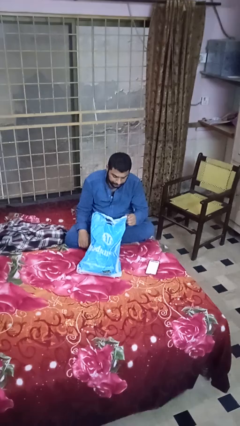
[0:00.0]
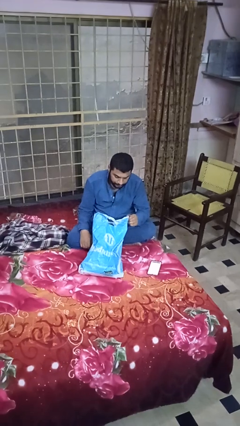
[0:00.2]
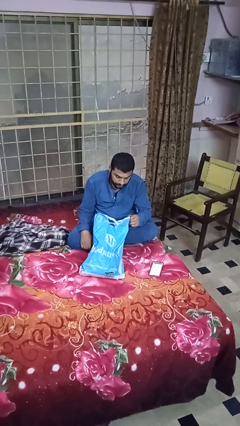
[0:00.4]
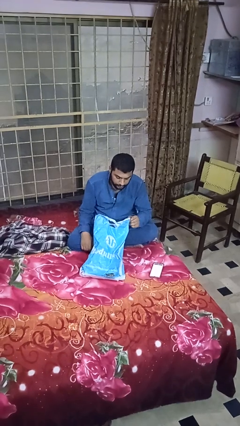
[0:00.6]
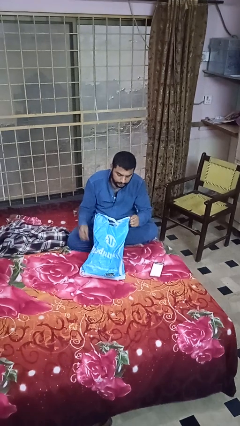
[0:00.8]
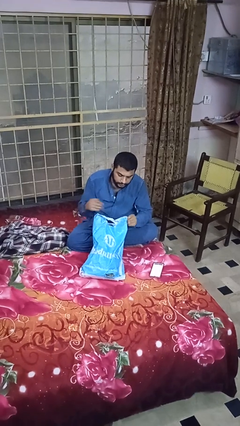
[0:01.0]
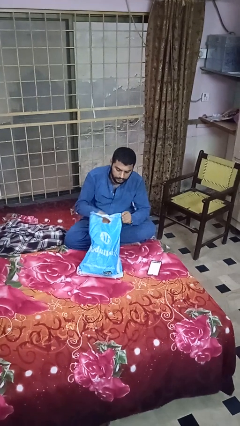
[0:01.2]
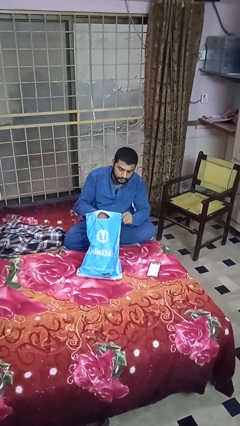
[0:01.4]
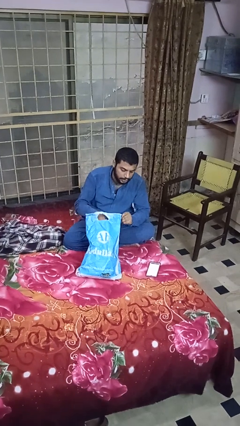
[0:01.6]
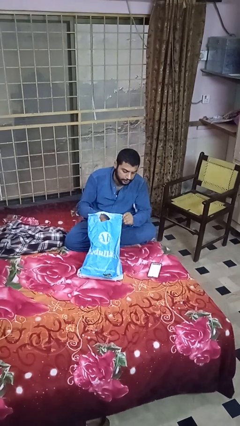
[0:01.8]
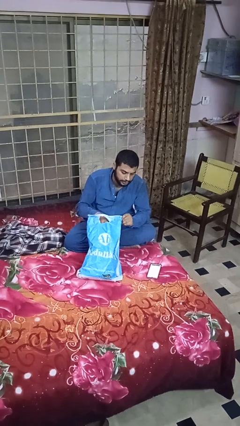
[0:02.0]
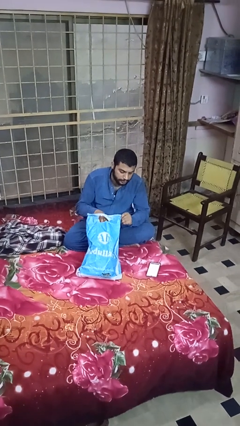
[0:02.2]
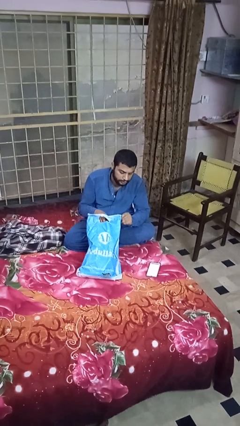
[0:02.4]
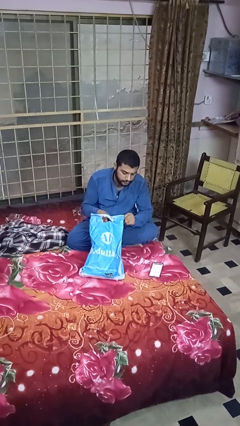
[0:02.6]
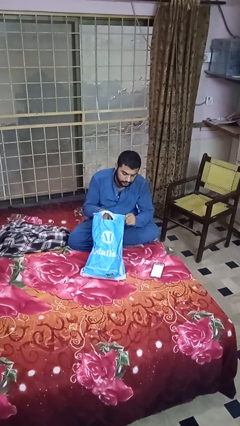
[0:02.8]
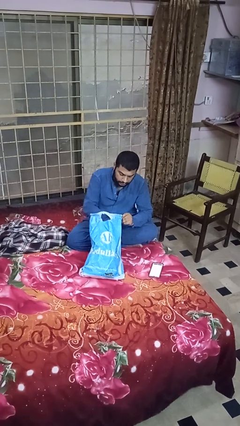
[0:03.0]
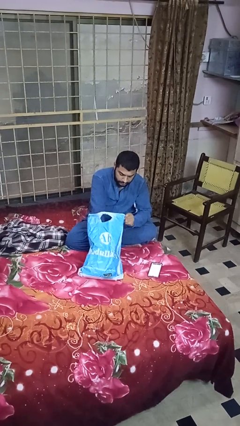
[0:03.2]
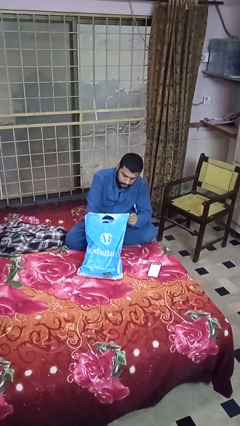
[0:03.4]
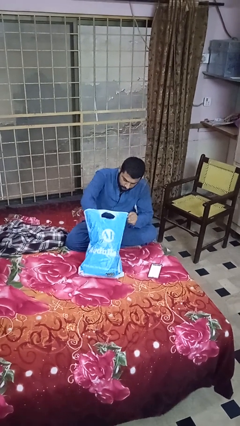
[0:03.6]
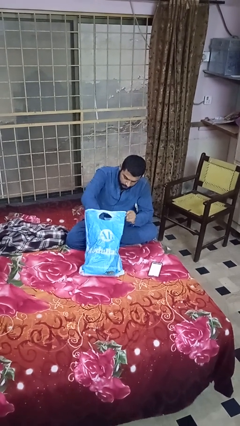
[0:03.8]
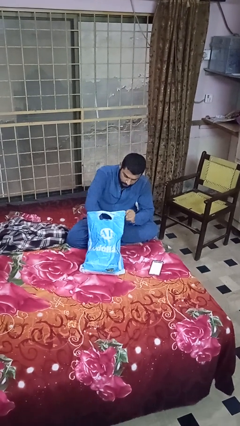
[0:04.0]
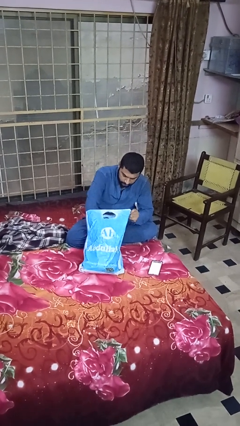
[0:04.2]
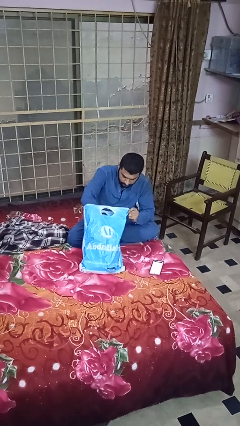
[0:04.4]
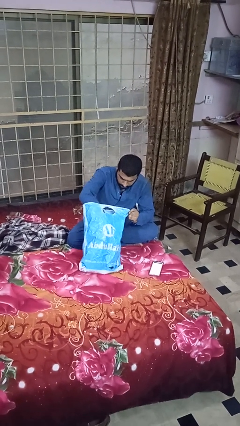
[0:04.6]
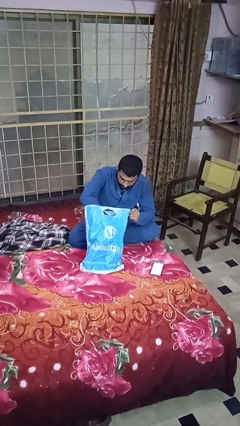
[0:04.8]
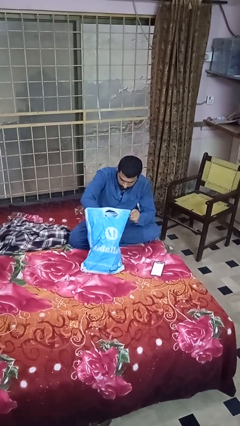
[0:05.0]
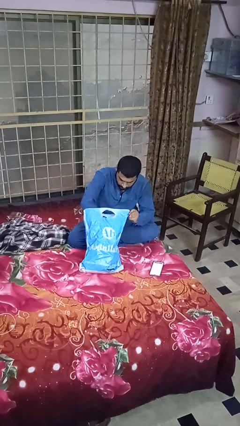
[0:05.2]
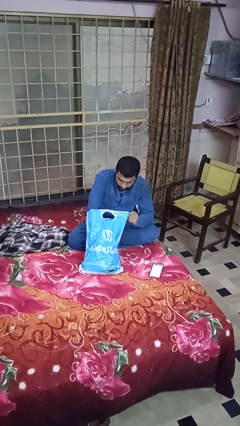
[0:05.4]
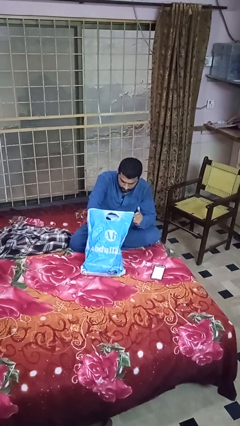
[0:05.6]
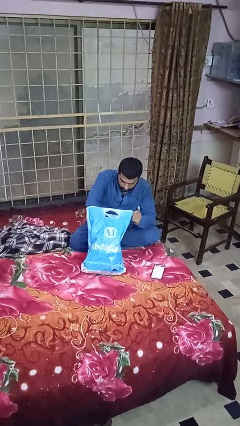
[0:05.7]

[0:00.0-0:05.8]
person searches in bag

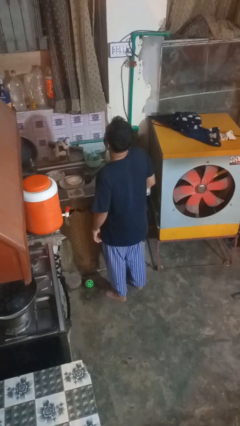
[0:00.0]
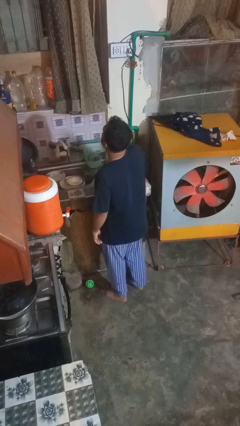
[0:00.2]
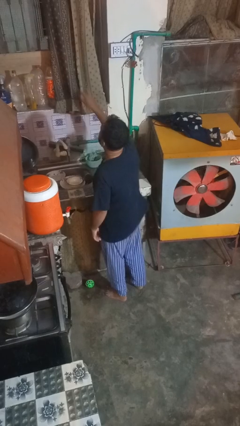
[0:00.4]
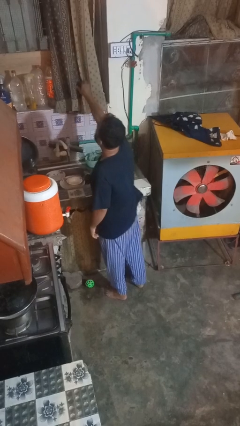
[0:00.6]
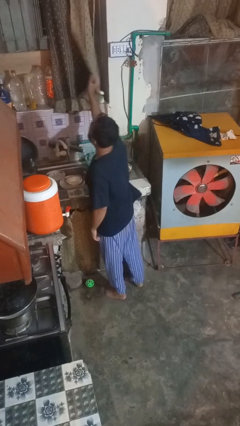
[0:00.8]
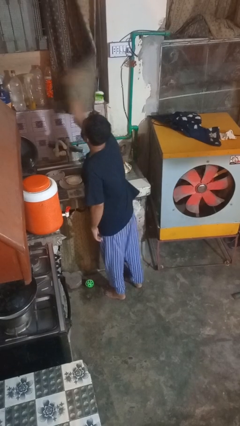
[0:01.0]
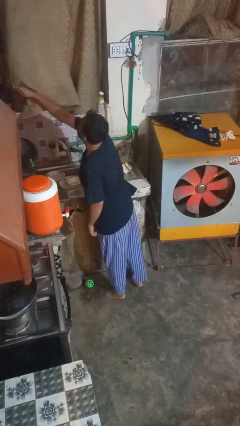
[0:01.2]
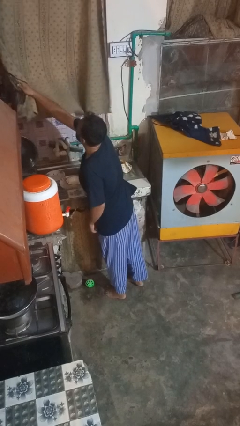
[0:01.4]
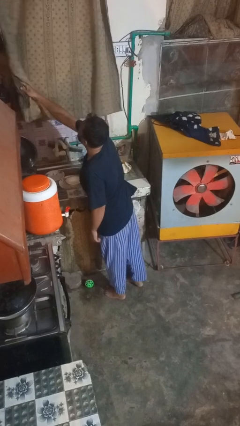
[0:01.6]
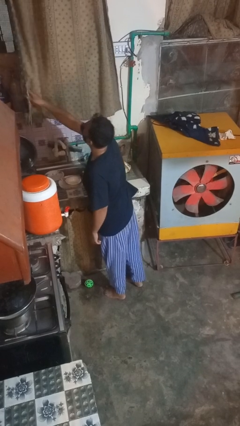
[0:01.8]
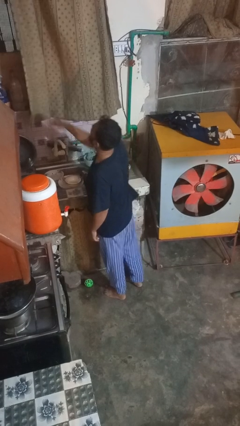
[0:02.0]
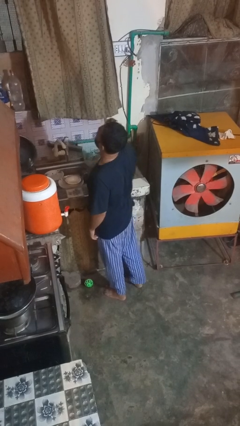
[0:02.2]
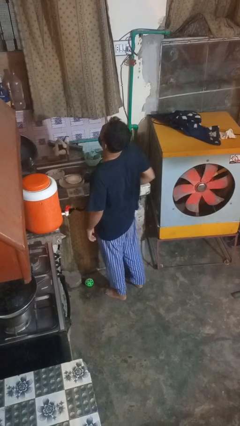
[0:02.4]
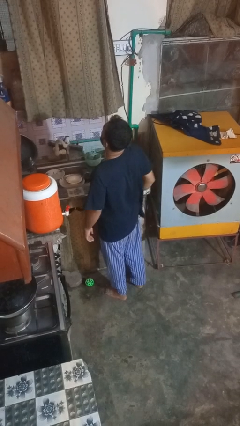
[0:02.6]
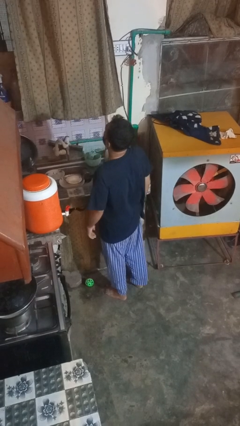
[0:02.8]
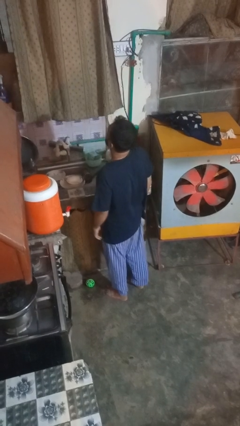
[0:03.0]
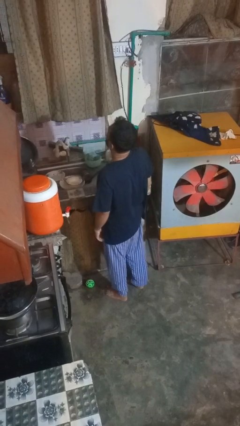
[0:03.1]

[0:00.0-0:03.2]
person closes curtains

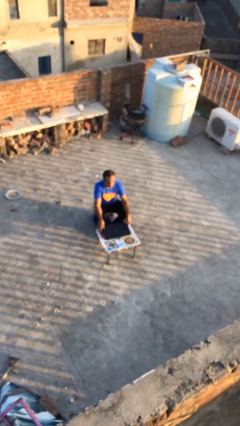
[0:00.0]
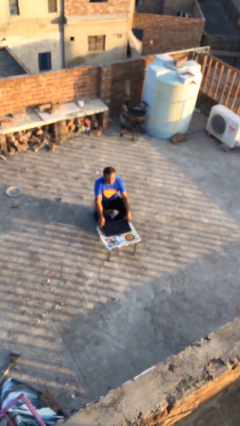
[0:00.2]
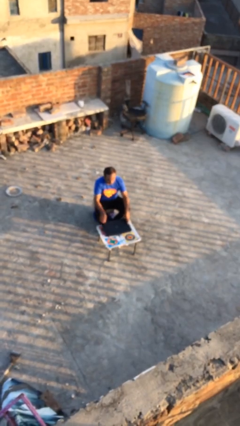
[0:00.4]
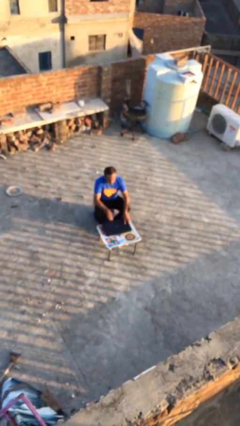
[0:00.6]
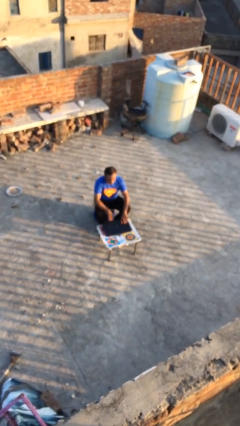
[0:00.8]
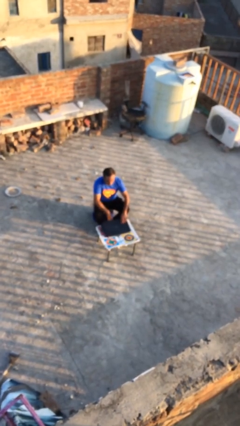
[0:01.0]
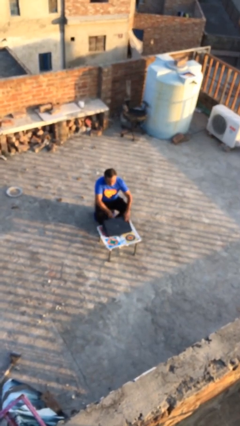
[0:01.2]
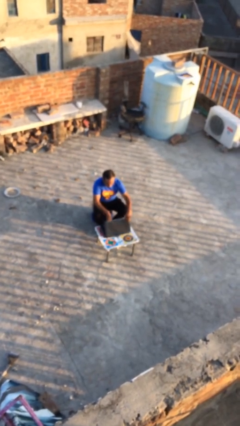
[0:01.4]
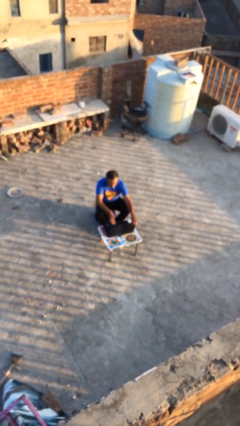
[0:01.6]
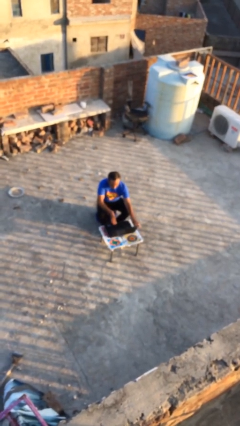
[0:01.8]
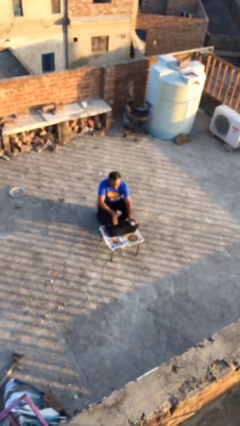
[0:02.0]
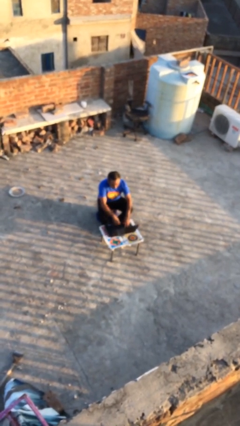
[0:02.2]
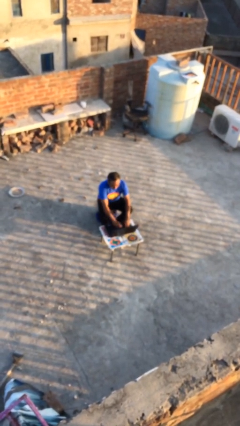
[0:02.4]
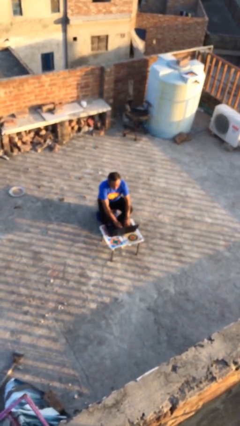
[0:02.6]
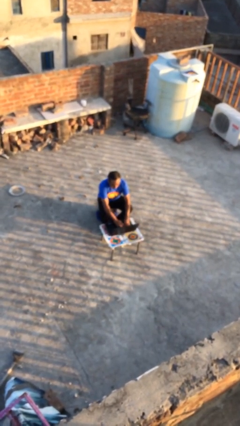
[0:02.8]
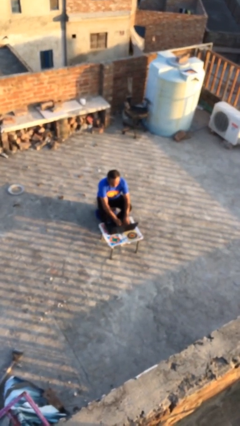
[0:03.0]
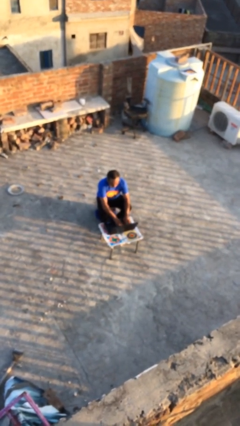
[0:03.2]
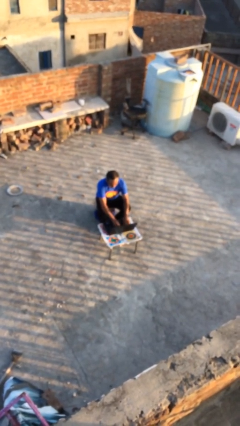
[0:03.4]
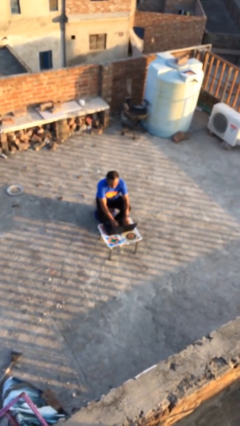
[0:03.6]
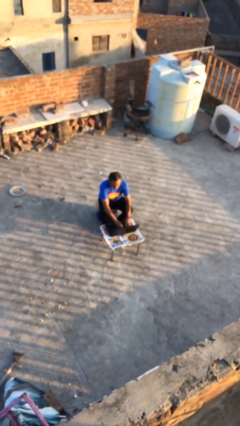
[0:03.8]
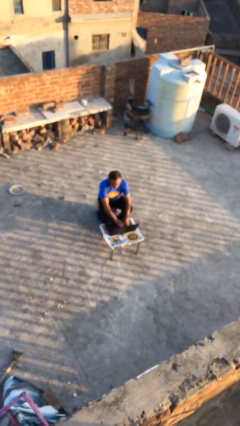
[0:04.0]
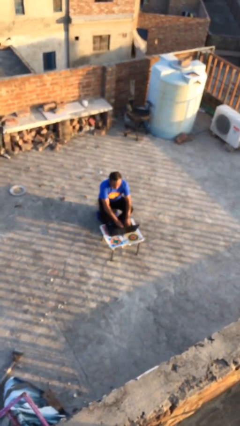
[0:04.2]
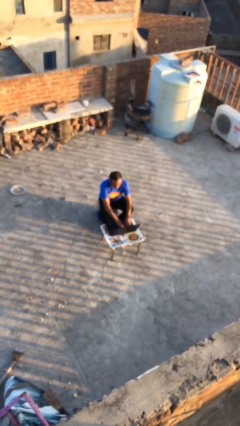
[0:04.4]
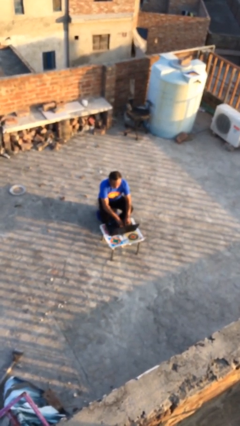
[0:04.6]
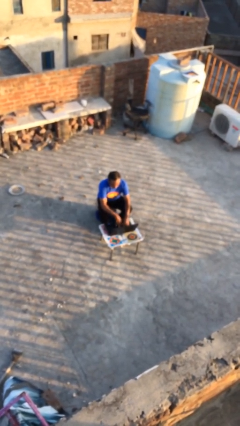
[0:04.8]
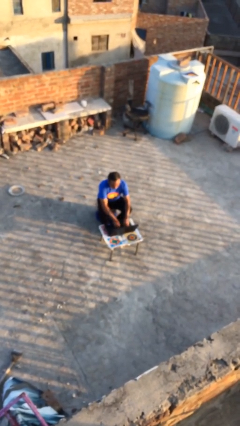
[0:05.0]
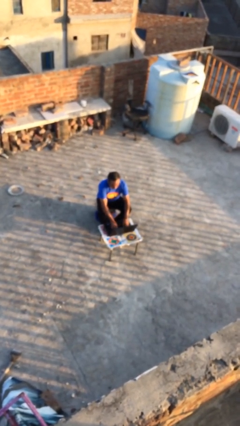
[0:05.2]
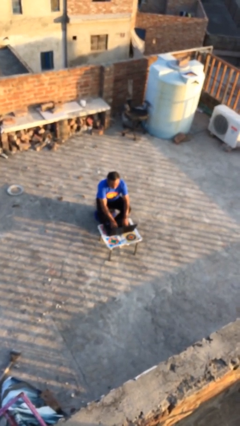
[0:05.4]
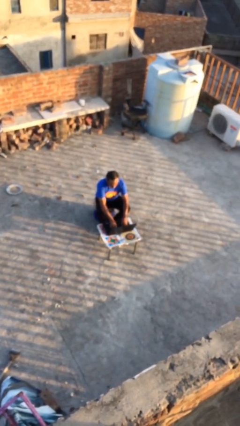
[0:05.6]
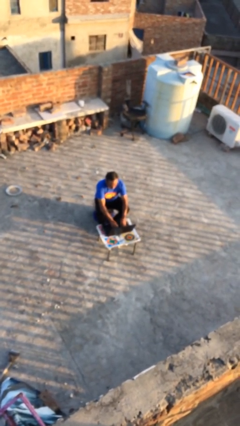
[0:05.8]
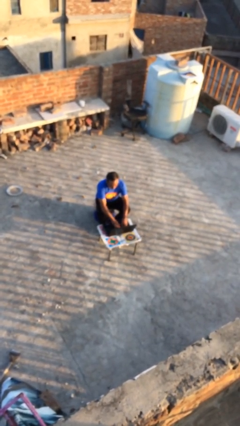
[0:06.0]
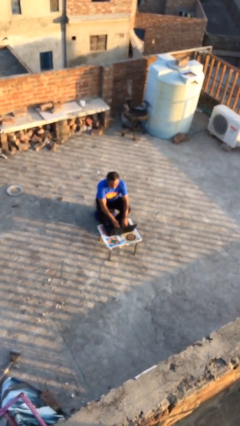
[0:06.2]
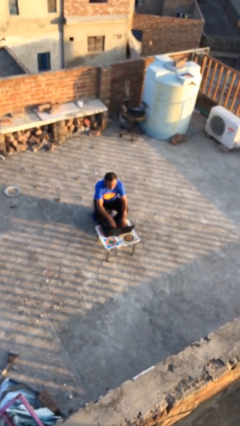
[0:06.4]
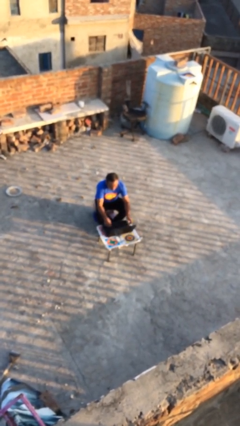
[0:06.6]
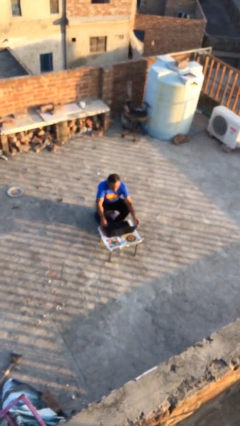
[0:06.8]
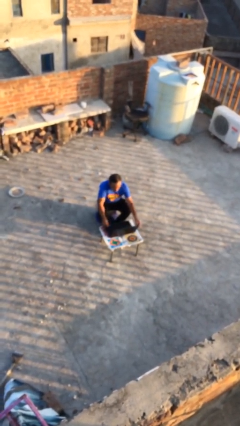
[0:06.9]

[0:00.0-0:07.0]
person interacts with laptop

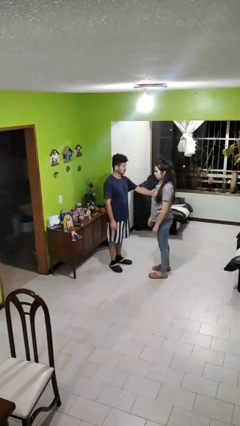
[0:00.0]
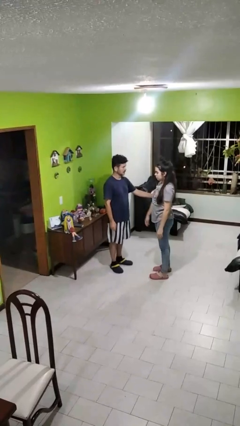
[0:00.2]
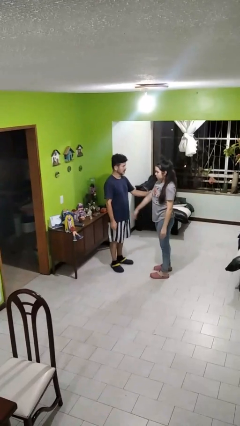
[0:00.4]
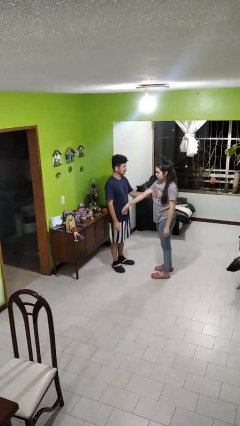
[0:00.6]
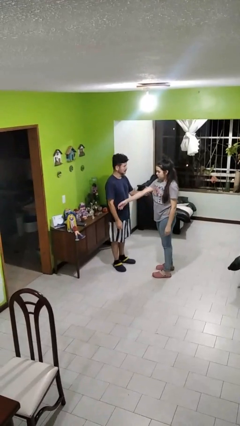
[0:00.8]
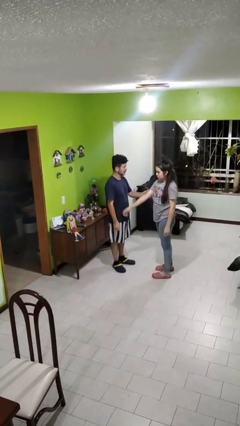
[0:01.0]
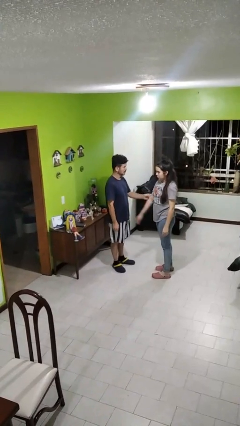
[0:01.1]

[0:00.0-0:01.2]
person grabs person by bicep

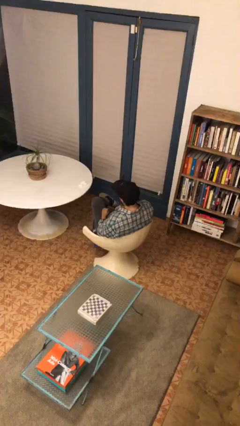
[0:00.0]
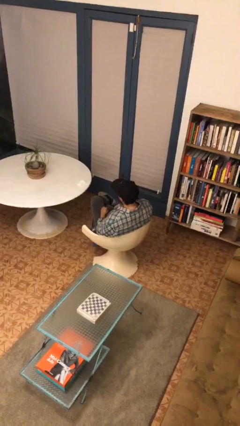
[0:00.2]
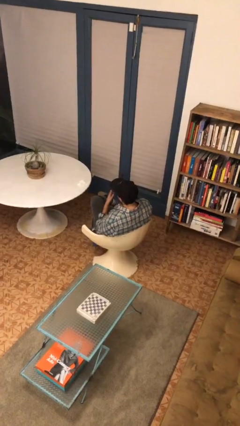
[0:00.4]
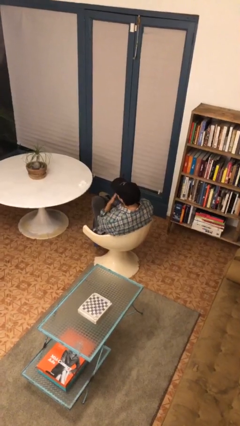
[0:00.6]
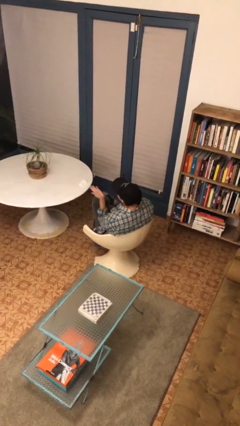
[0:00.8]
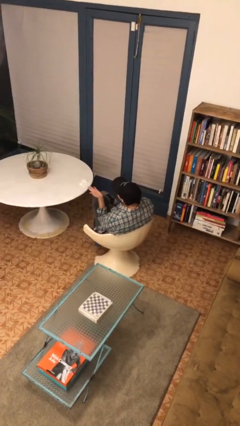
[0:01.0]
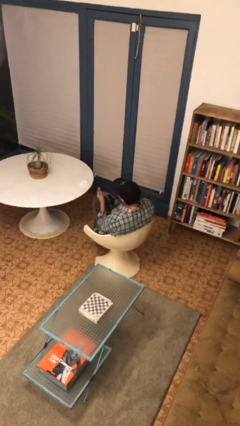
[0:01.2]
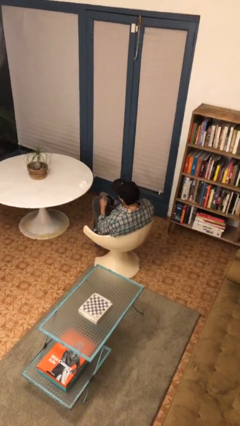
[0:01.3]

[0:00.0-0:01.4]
person gestures blow kiss
